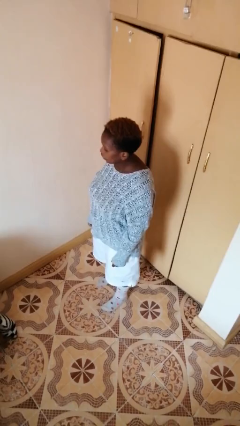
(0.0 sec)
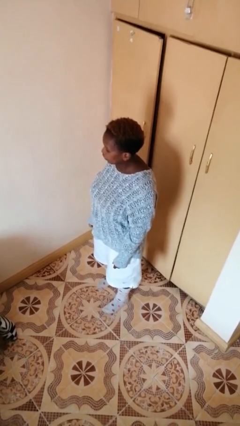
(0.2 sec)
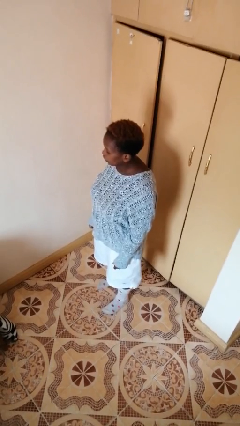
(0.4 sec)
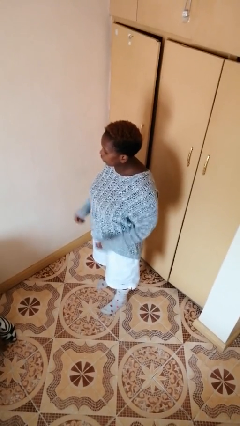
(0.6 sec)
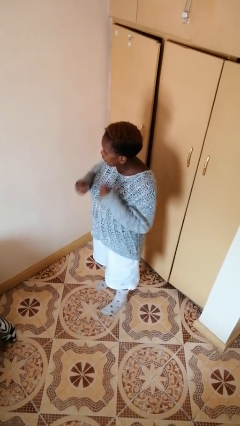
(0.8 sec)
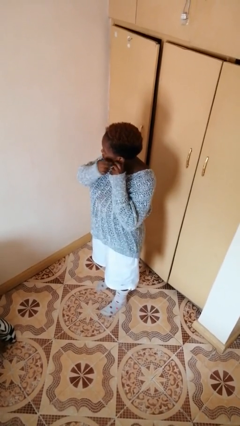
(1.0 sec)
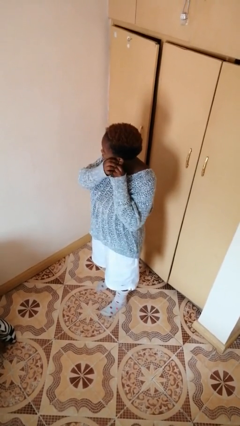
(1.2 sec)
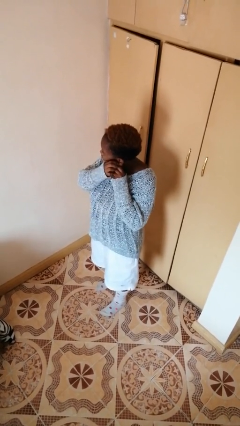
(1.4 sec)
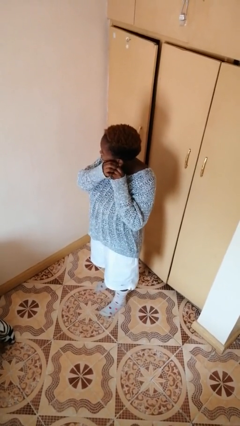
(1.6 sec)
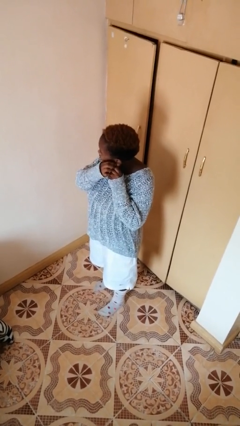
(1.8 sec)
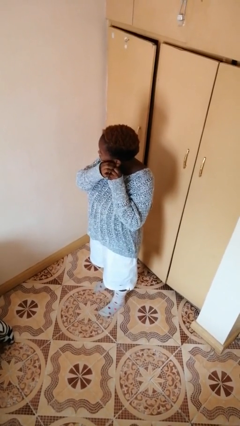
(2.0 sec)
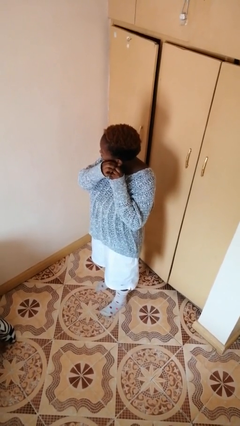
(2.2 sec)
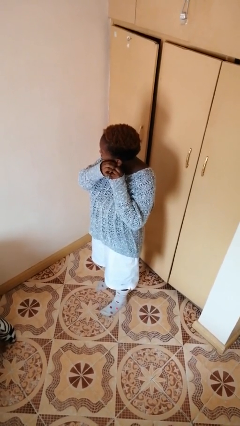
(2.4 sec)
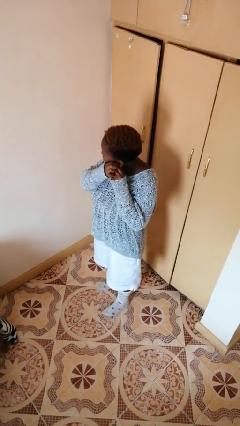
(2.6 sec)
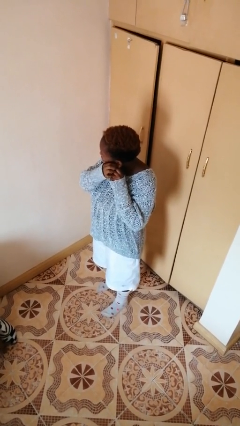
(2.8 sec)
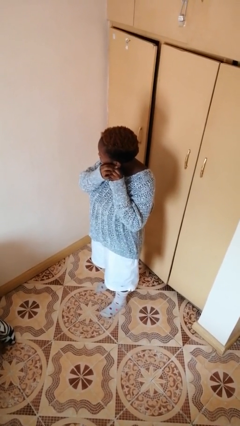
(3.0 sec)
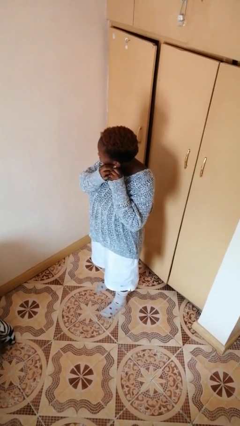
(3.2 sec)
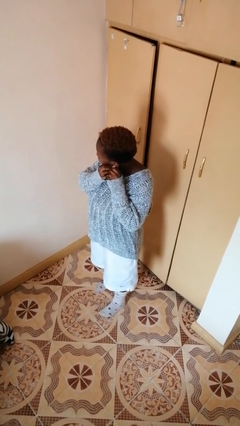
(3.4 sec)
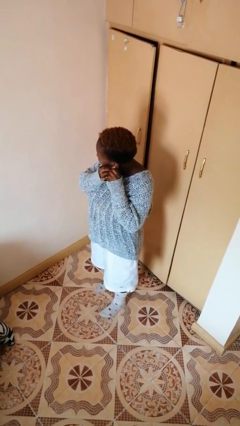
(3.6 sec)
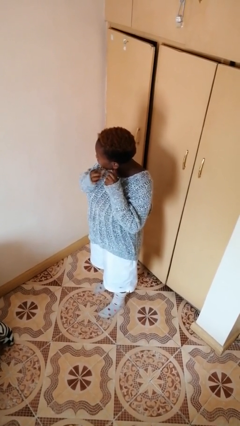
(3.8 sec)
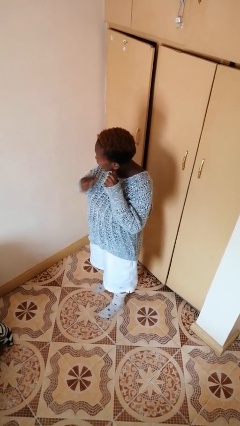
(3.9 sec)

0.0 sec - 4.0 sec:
person puts on earrings

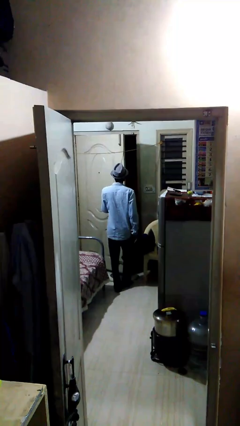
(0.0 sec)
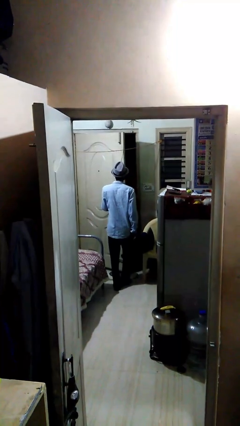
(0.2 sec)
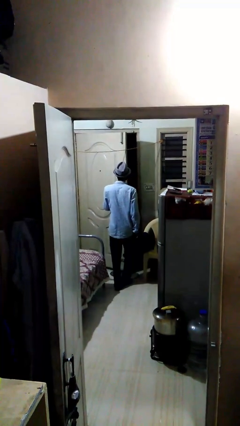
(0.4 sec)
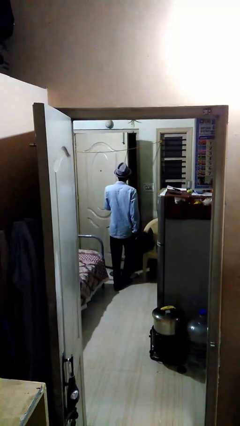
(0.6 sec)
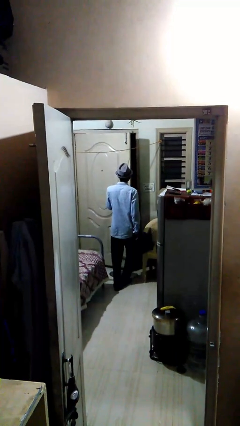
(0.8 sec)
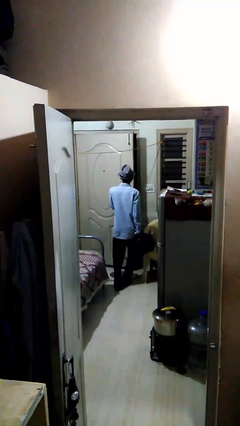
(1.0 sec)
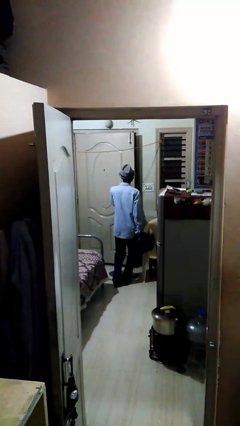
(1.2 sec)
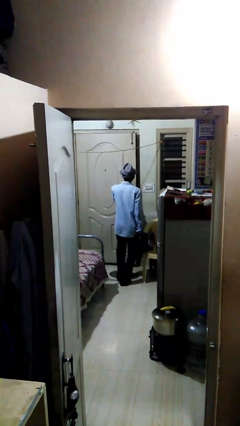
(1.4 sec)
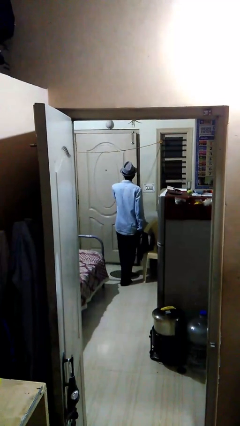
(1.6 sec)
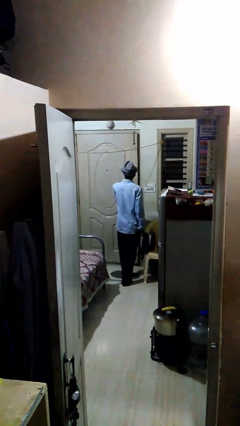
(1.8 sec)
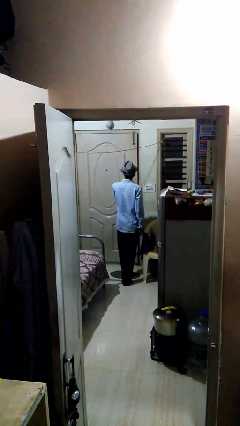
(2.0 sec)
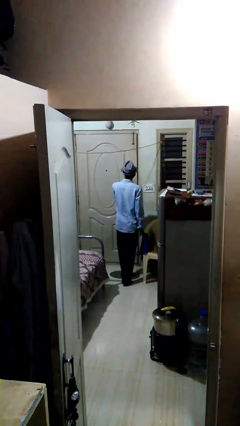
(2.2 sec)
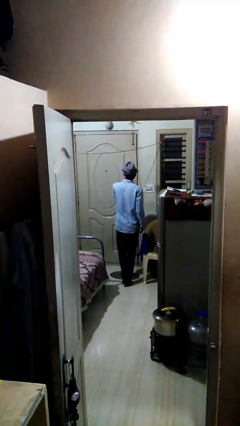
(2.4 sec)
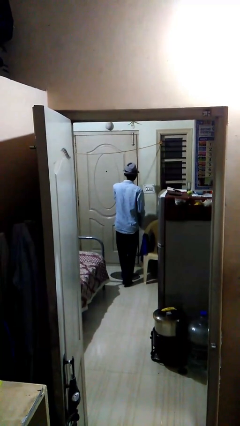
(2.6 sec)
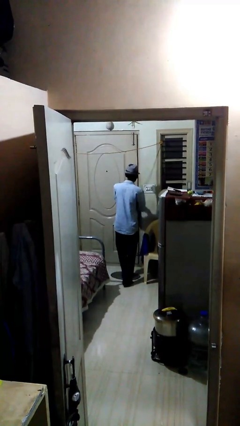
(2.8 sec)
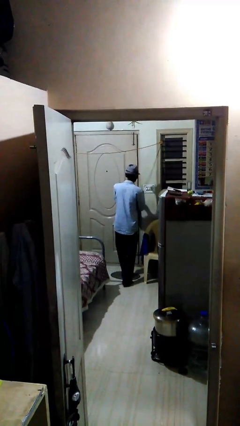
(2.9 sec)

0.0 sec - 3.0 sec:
person closes facility door

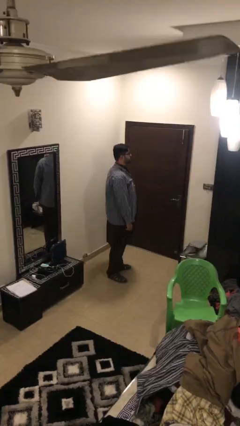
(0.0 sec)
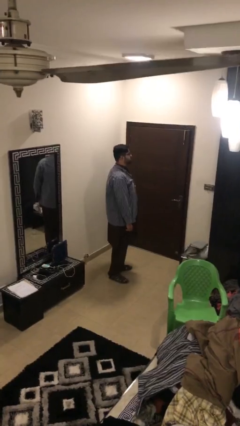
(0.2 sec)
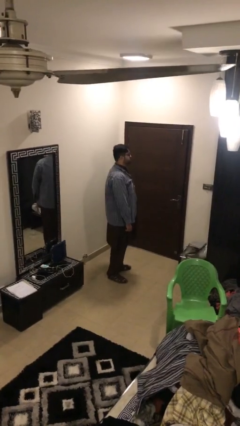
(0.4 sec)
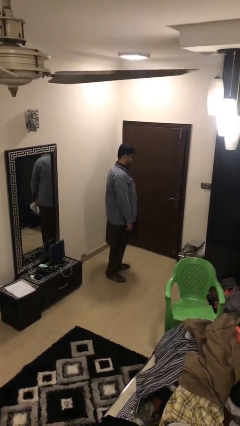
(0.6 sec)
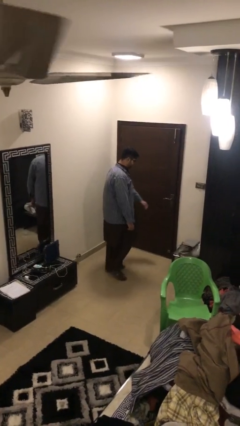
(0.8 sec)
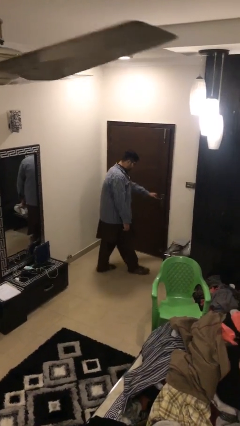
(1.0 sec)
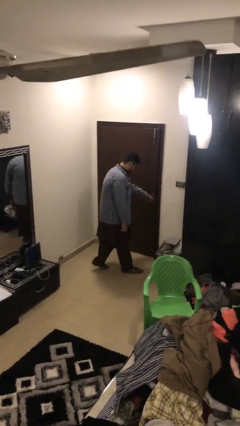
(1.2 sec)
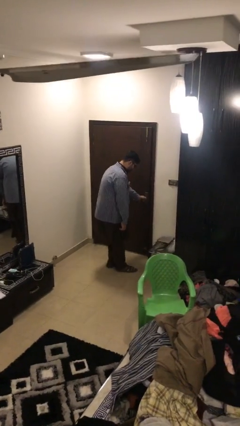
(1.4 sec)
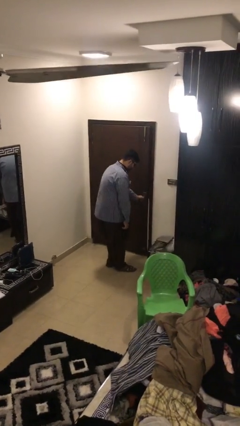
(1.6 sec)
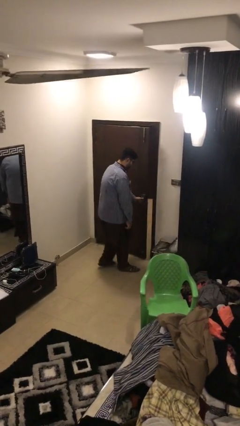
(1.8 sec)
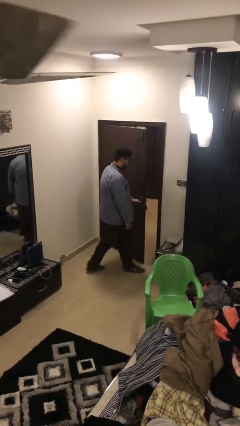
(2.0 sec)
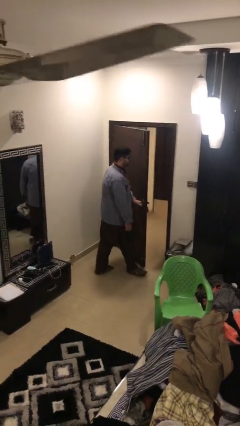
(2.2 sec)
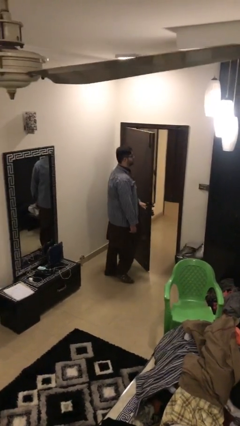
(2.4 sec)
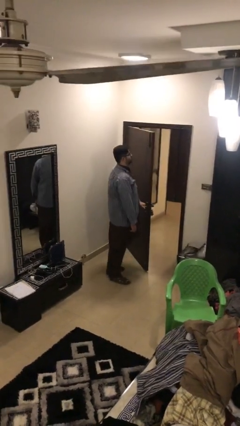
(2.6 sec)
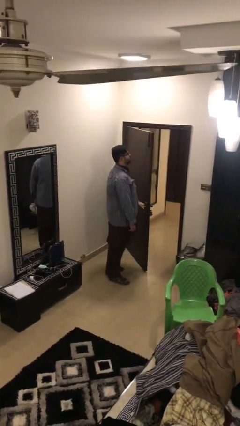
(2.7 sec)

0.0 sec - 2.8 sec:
person opens facility door

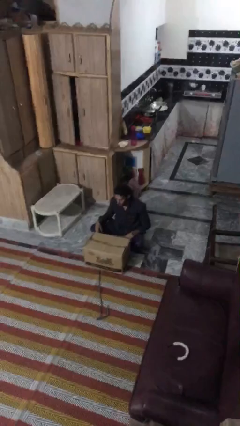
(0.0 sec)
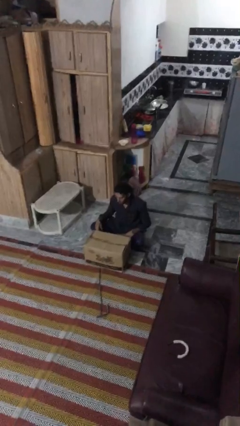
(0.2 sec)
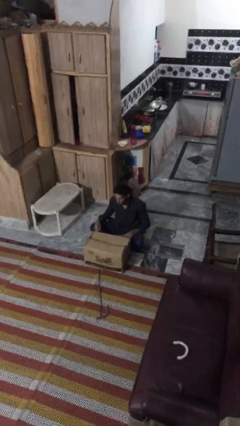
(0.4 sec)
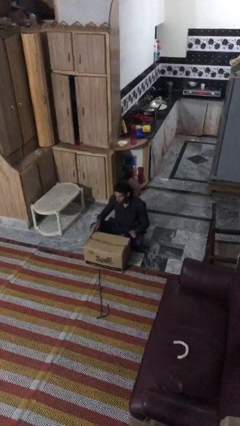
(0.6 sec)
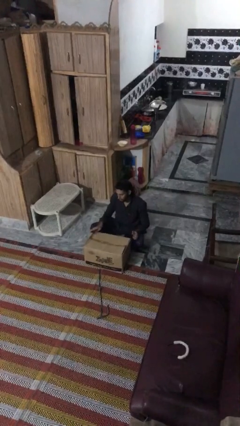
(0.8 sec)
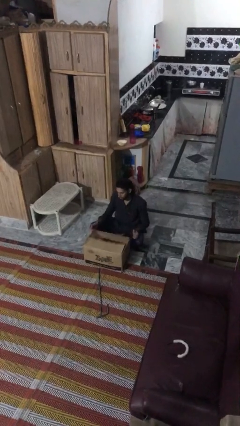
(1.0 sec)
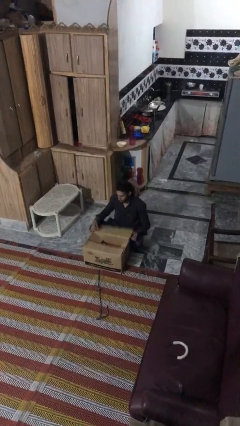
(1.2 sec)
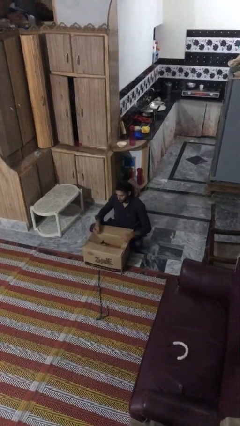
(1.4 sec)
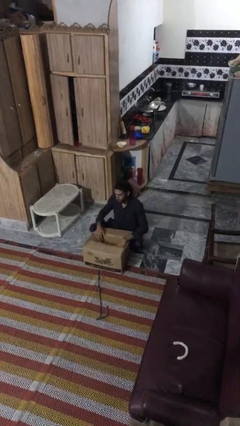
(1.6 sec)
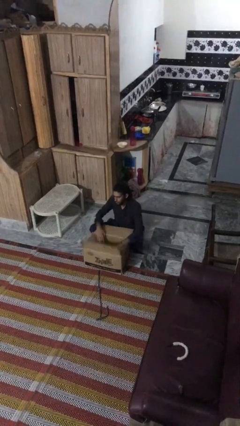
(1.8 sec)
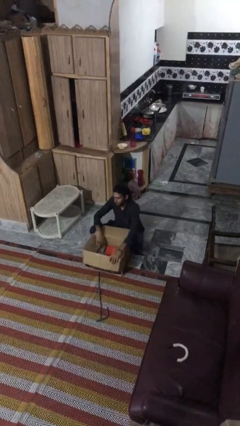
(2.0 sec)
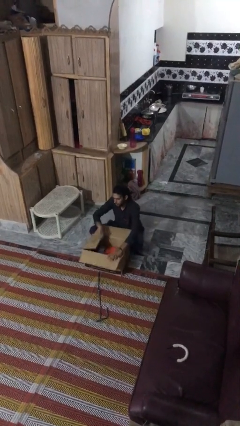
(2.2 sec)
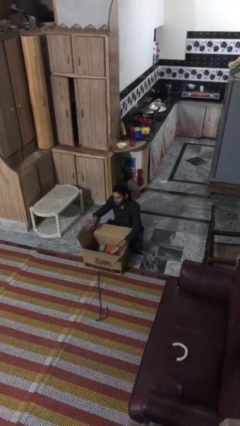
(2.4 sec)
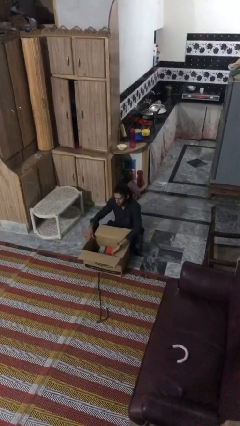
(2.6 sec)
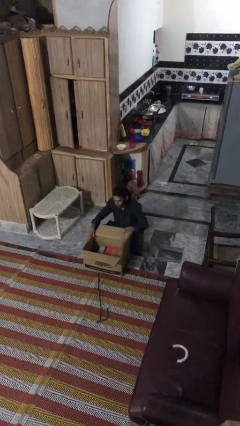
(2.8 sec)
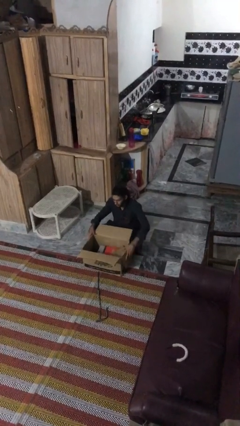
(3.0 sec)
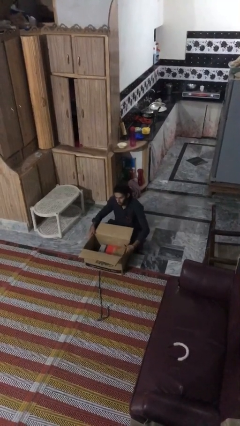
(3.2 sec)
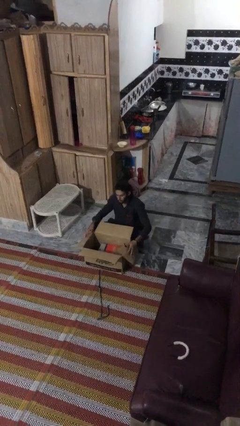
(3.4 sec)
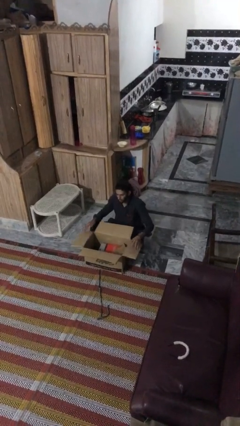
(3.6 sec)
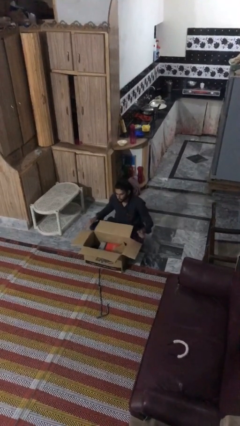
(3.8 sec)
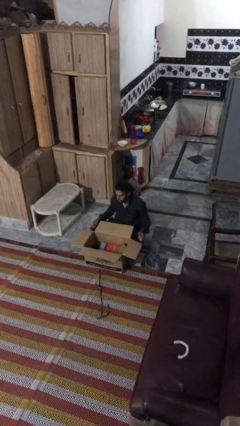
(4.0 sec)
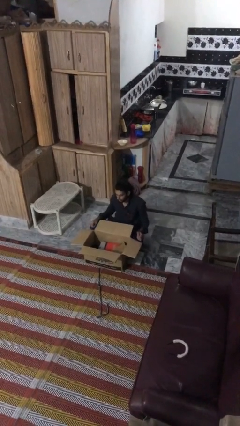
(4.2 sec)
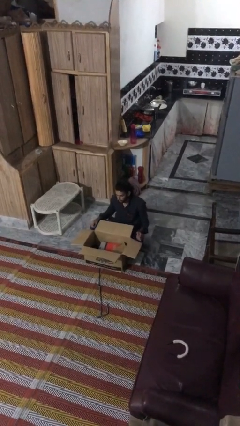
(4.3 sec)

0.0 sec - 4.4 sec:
person opens box

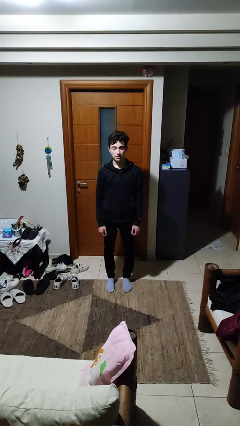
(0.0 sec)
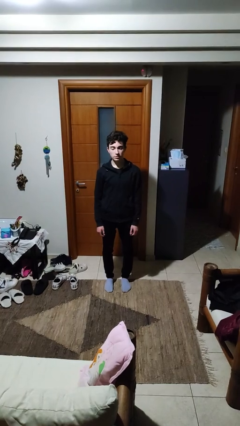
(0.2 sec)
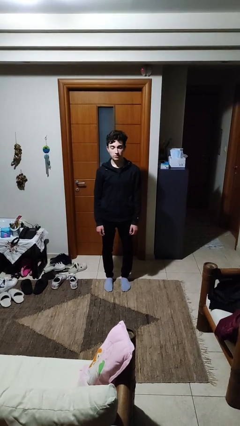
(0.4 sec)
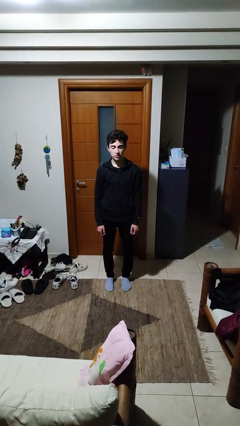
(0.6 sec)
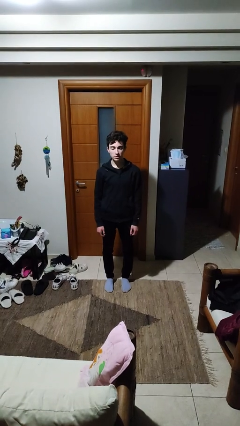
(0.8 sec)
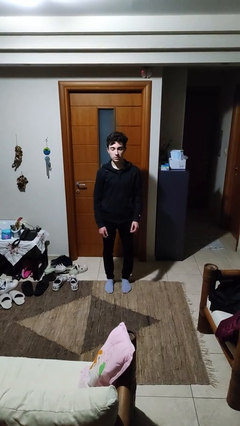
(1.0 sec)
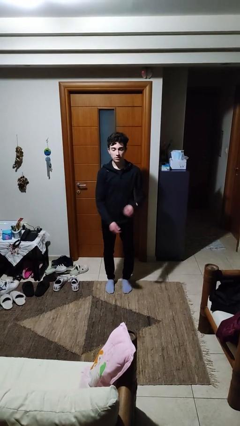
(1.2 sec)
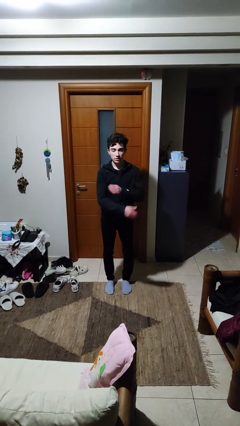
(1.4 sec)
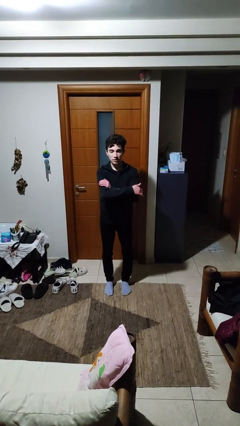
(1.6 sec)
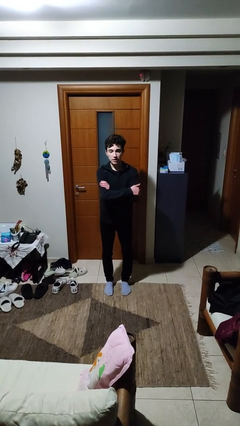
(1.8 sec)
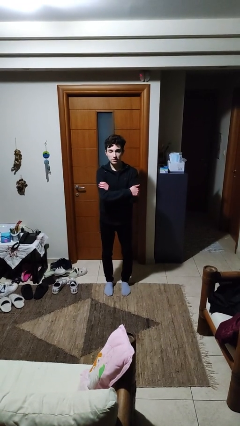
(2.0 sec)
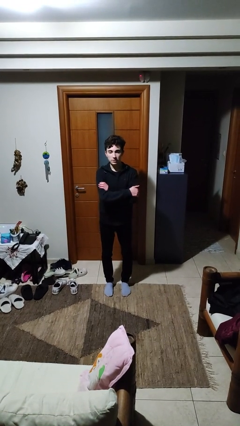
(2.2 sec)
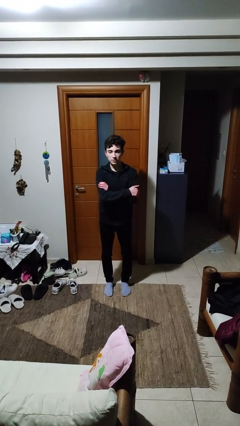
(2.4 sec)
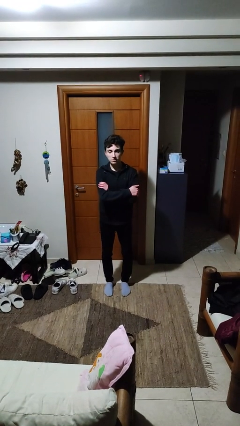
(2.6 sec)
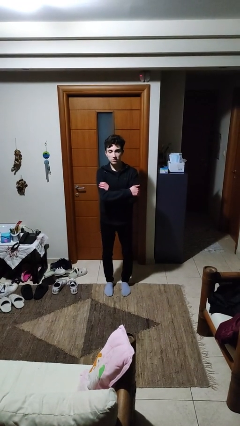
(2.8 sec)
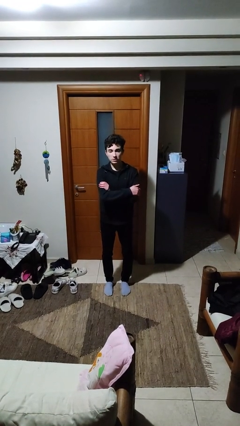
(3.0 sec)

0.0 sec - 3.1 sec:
person crosses arms

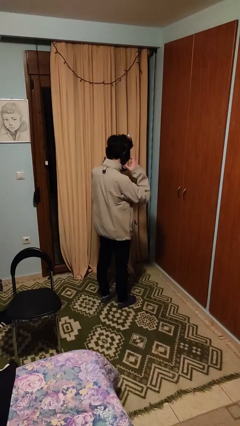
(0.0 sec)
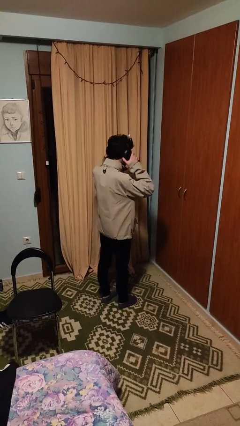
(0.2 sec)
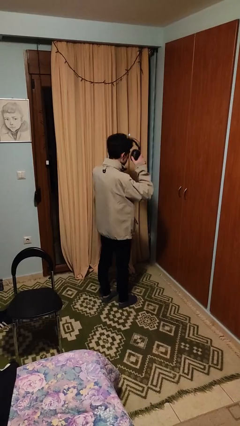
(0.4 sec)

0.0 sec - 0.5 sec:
person takes off headphones
